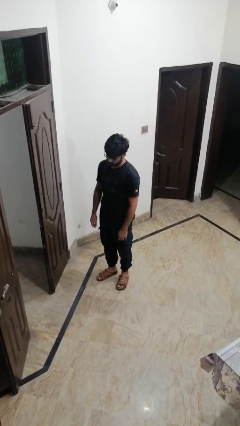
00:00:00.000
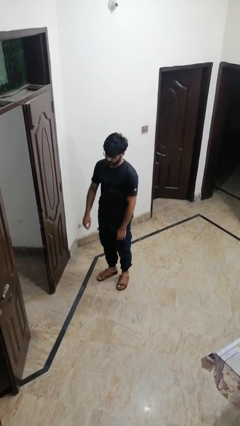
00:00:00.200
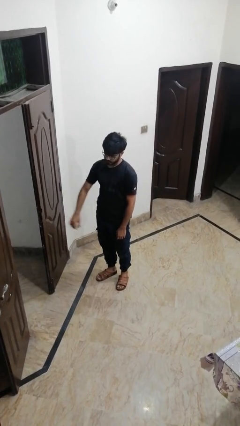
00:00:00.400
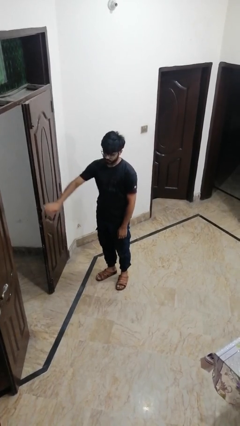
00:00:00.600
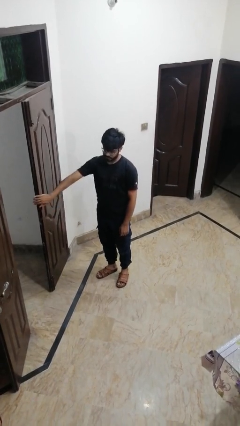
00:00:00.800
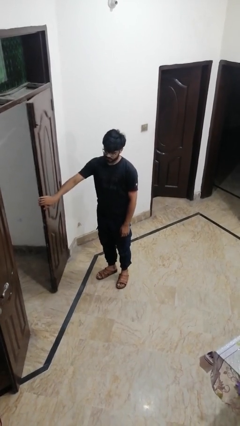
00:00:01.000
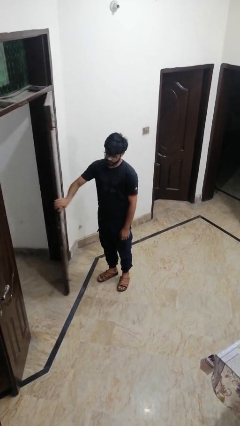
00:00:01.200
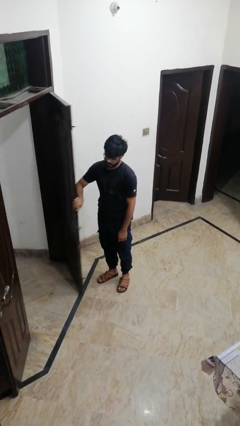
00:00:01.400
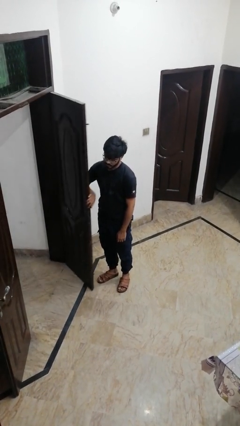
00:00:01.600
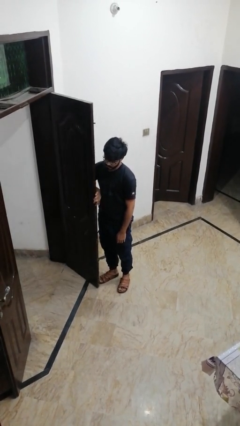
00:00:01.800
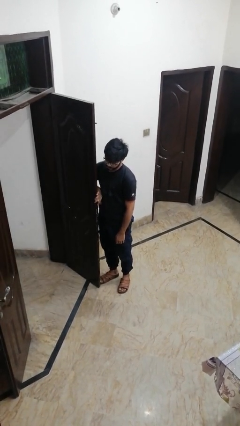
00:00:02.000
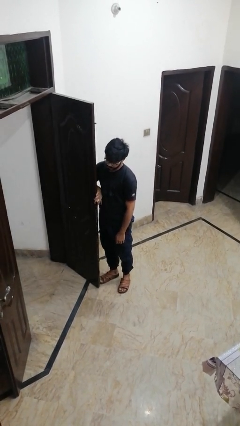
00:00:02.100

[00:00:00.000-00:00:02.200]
person opens facility door

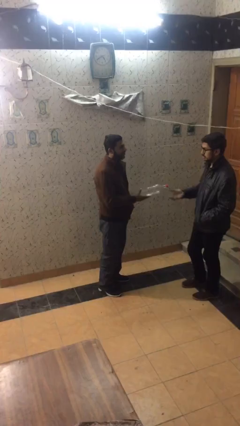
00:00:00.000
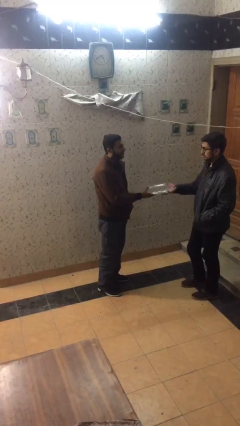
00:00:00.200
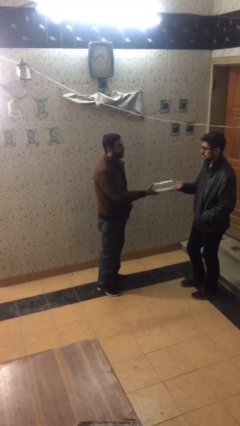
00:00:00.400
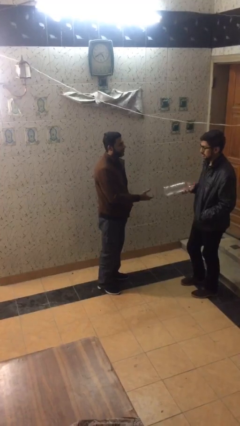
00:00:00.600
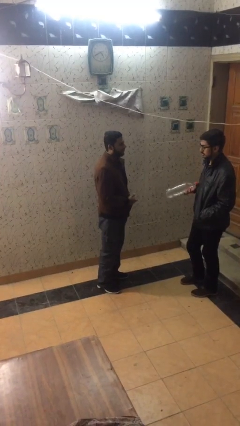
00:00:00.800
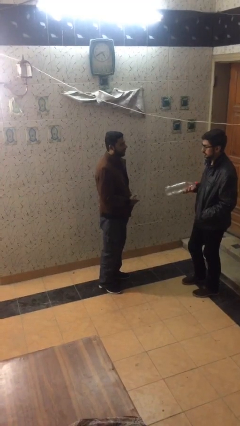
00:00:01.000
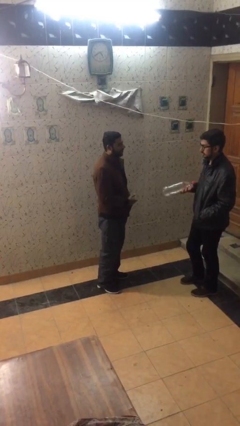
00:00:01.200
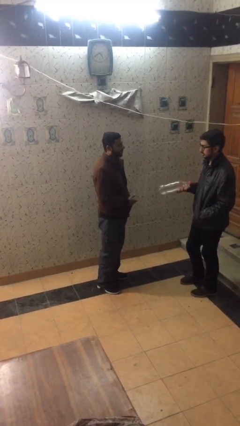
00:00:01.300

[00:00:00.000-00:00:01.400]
person transfers object to person

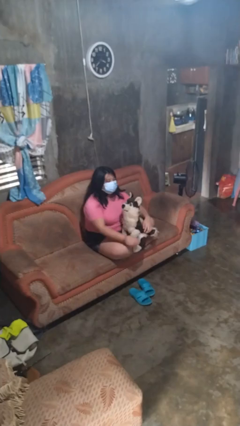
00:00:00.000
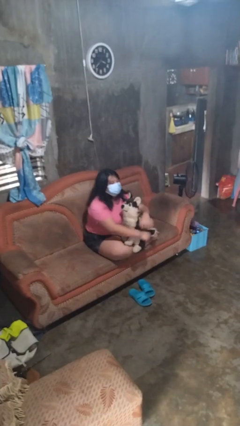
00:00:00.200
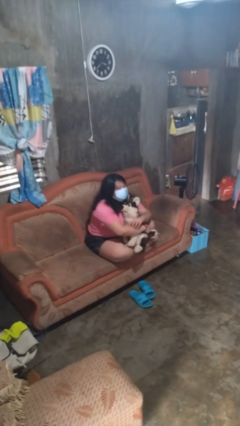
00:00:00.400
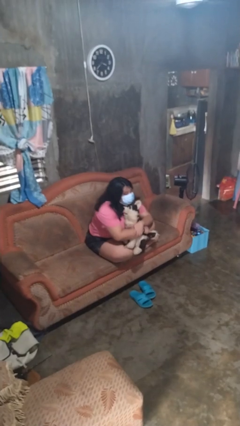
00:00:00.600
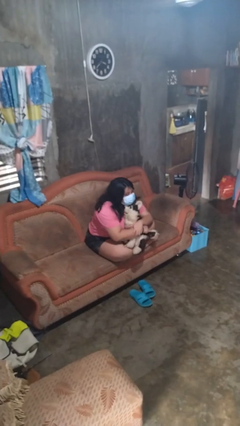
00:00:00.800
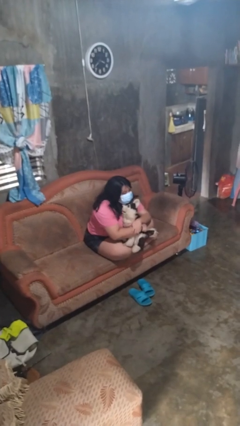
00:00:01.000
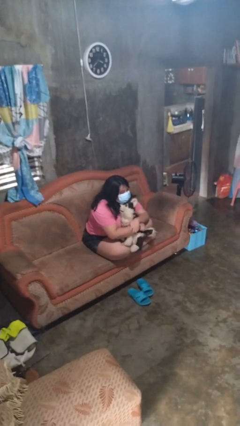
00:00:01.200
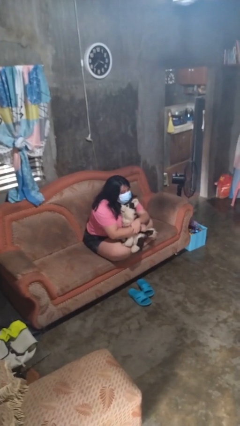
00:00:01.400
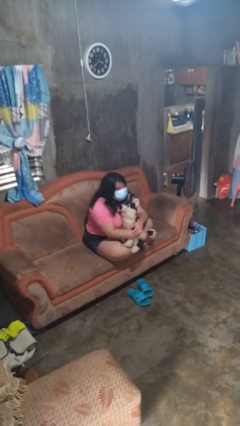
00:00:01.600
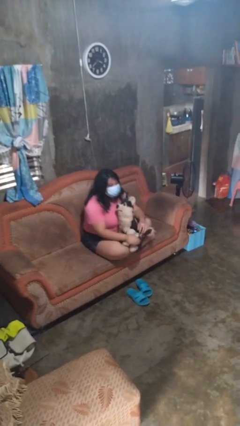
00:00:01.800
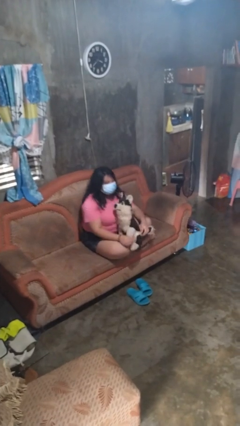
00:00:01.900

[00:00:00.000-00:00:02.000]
person hugs stuffed animal

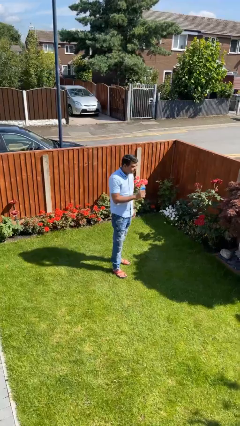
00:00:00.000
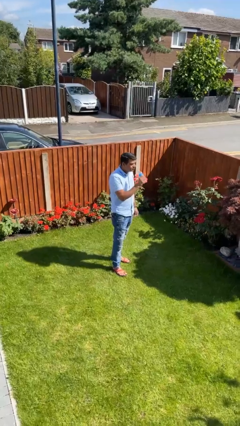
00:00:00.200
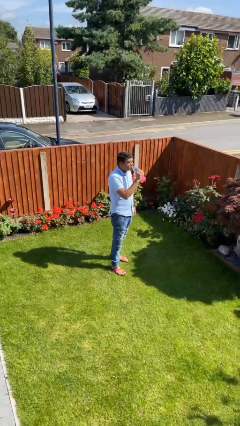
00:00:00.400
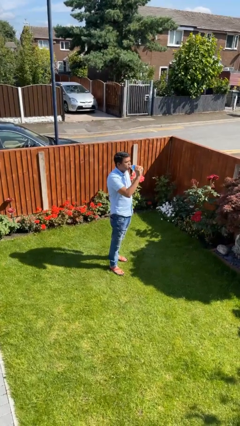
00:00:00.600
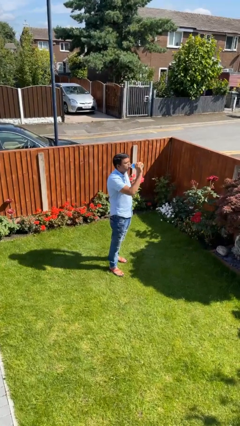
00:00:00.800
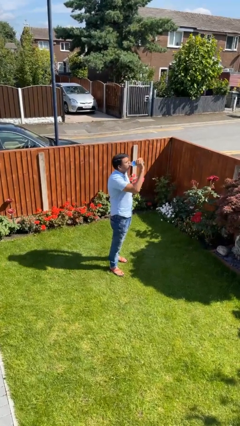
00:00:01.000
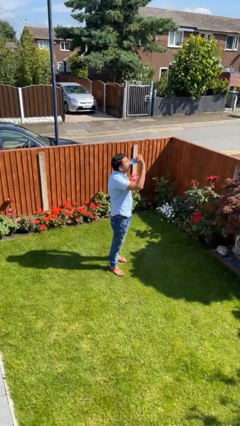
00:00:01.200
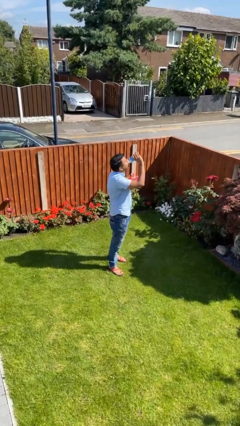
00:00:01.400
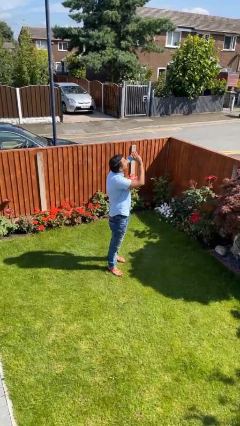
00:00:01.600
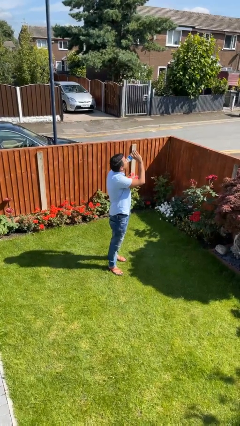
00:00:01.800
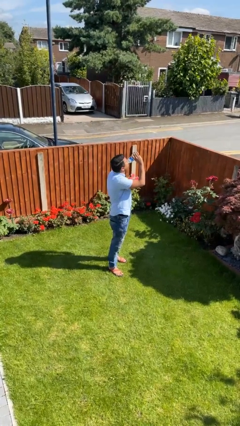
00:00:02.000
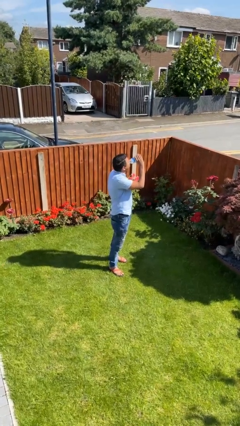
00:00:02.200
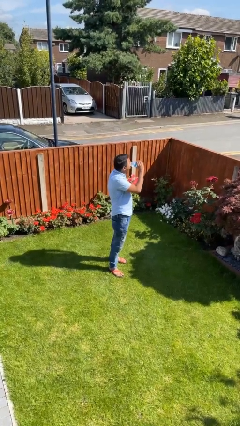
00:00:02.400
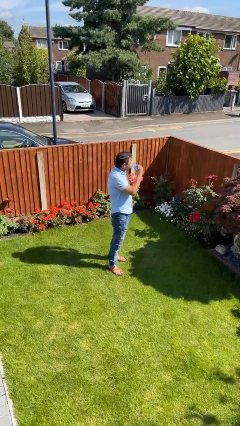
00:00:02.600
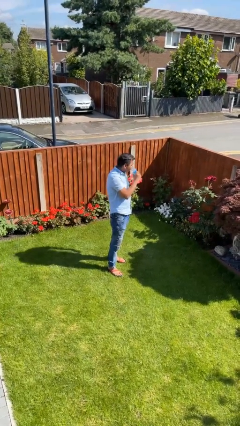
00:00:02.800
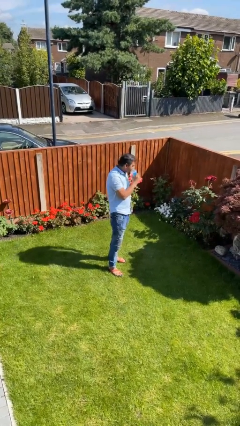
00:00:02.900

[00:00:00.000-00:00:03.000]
person drinks from bottle

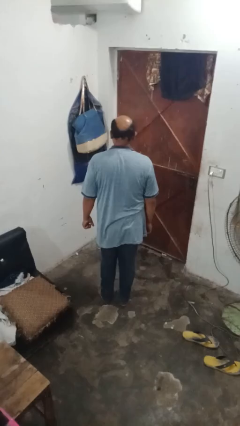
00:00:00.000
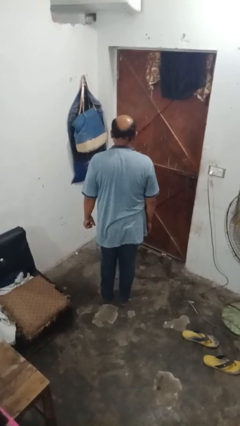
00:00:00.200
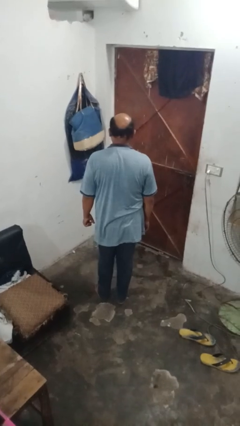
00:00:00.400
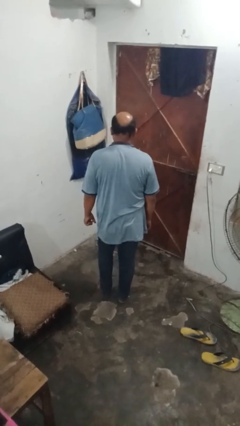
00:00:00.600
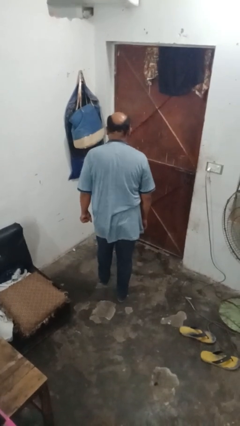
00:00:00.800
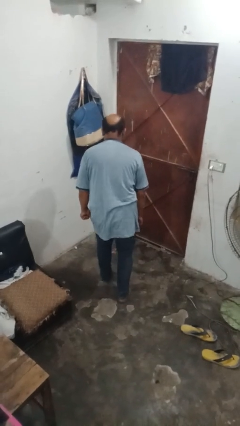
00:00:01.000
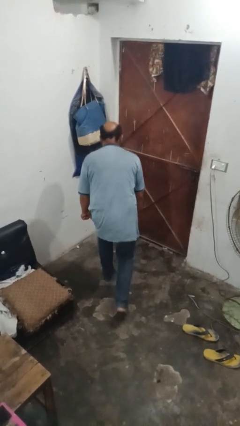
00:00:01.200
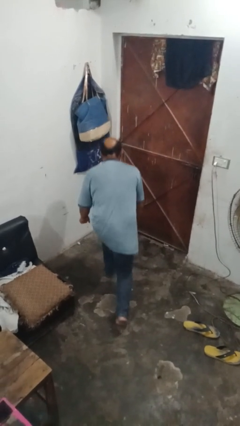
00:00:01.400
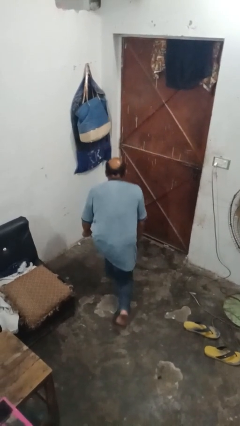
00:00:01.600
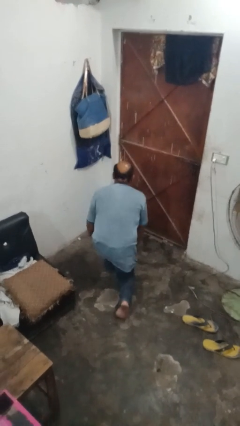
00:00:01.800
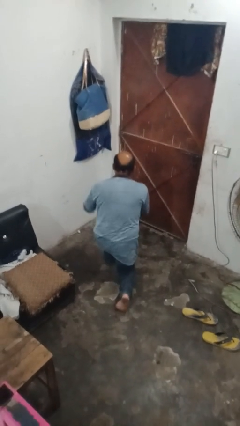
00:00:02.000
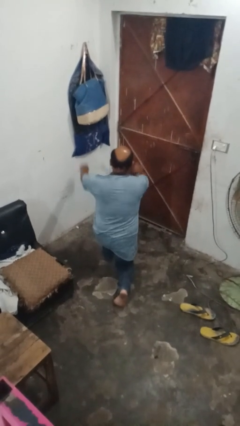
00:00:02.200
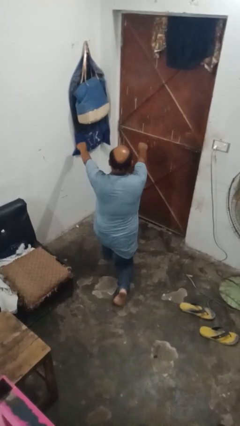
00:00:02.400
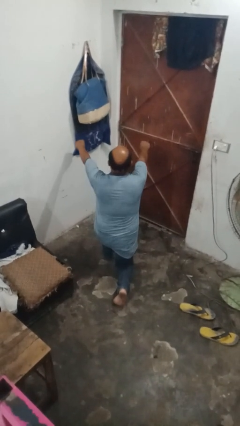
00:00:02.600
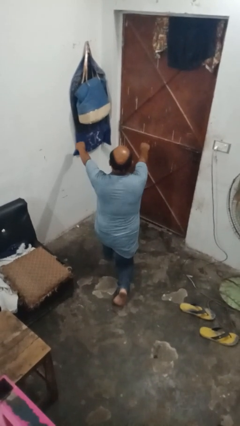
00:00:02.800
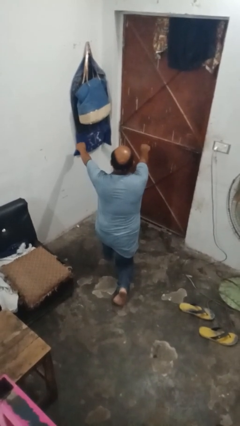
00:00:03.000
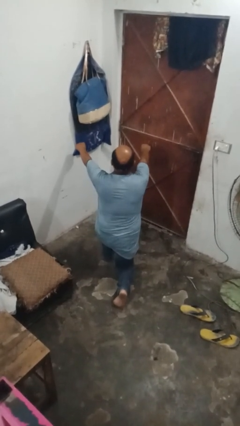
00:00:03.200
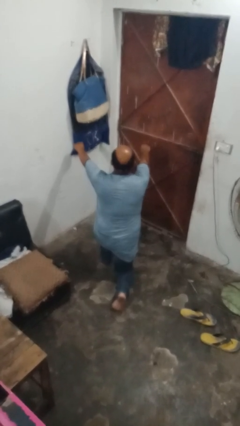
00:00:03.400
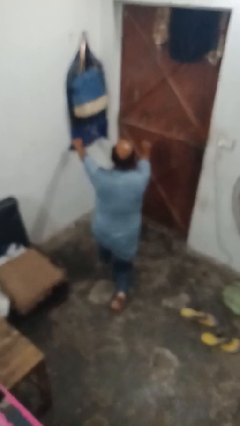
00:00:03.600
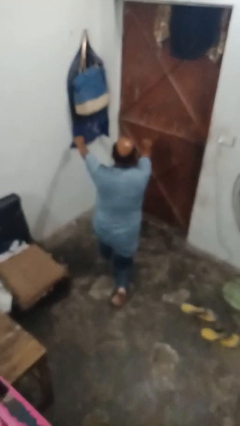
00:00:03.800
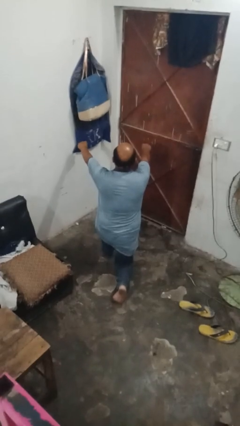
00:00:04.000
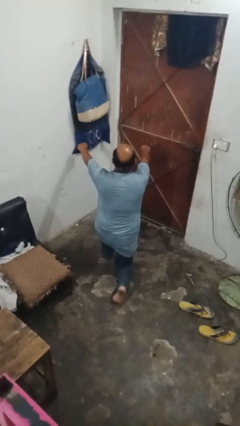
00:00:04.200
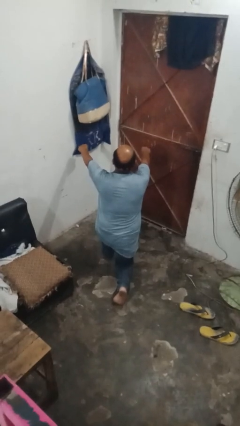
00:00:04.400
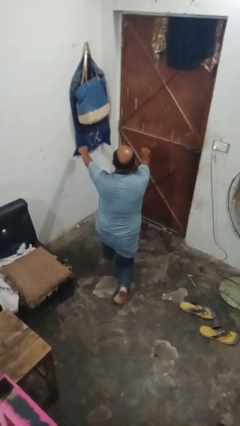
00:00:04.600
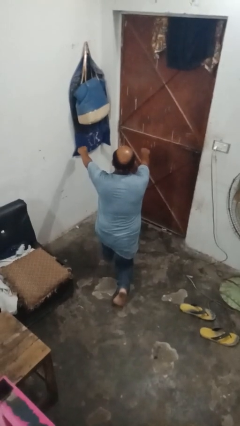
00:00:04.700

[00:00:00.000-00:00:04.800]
person eats snack from bag

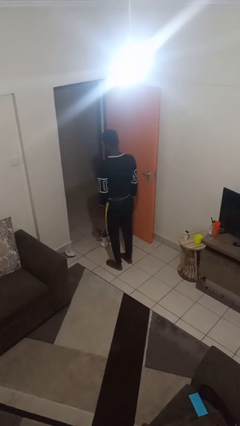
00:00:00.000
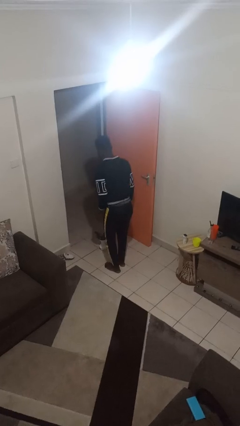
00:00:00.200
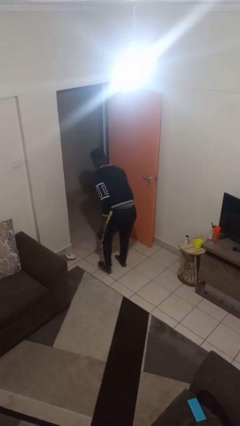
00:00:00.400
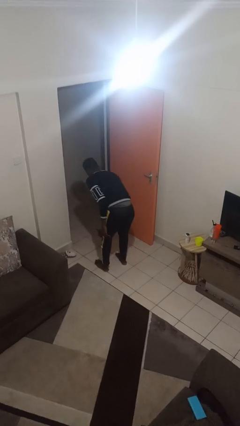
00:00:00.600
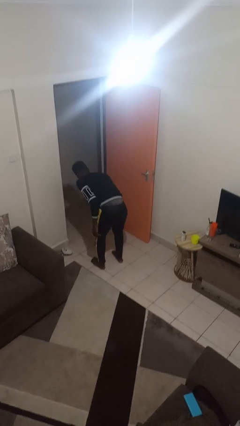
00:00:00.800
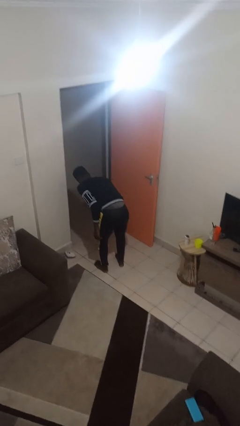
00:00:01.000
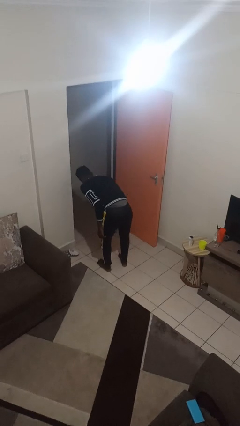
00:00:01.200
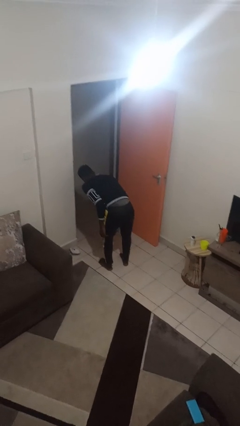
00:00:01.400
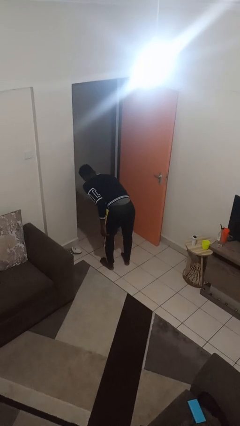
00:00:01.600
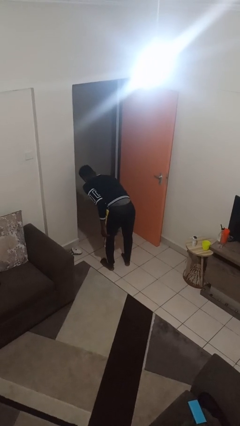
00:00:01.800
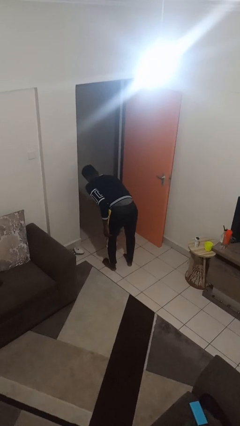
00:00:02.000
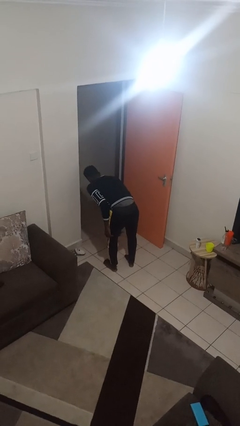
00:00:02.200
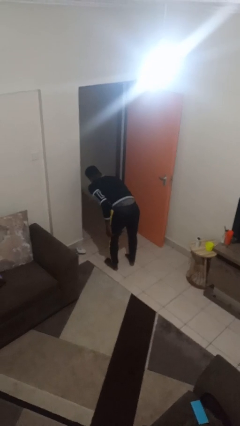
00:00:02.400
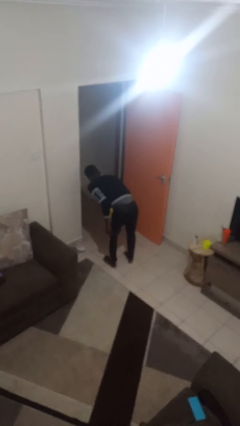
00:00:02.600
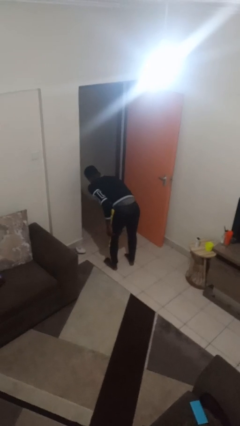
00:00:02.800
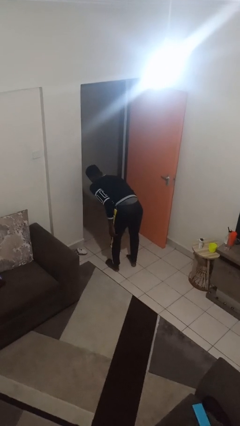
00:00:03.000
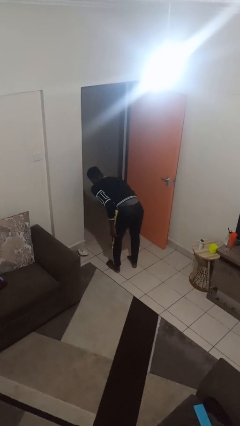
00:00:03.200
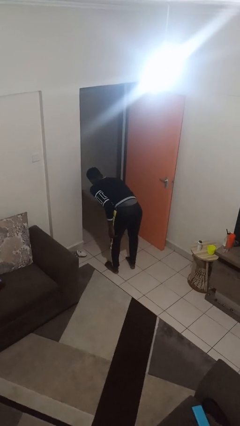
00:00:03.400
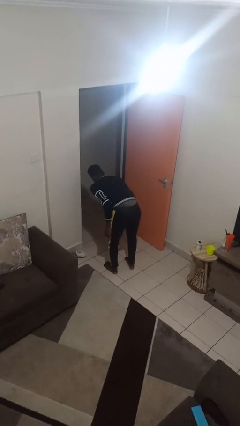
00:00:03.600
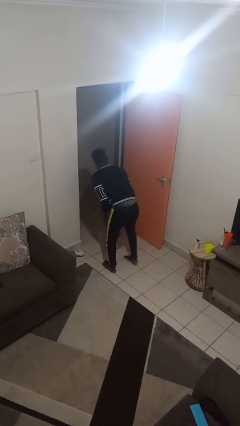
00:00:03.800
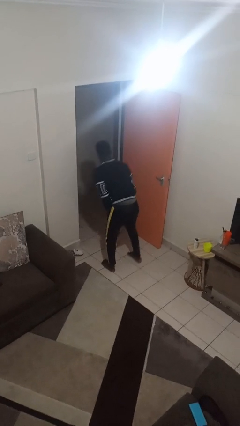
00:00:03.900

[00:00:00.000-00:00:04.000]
person waters houseplant

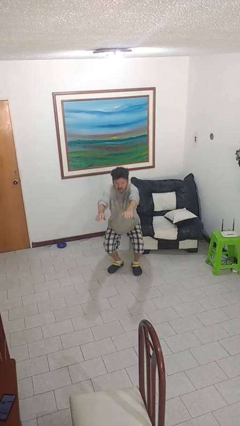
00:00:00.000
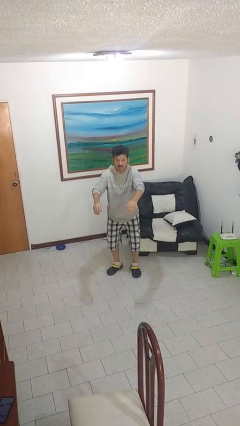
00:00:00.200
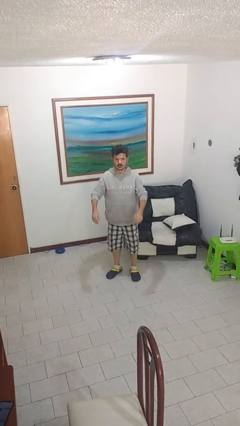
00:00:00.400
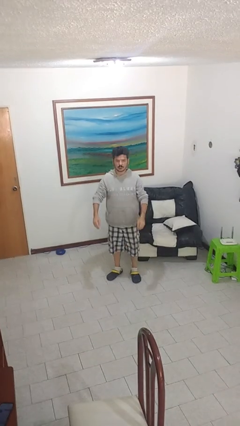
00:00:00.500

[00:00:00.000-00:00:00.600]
person stands up
